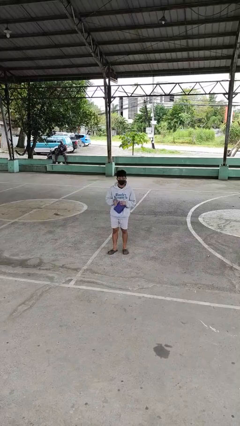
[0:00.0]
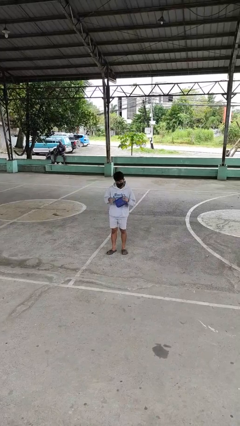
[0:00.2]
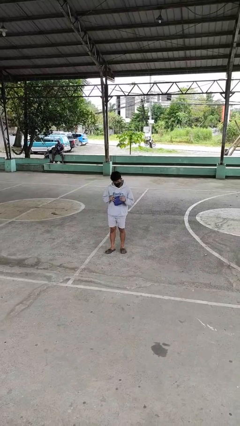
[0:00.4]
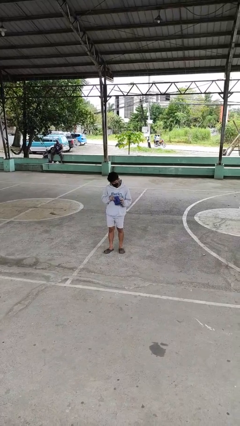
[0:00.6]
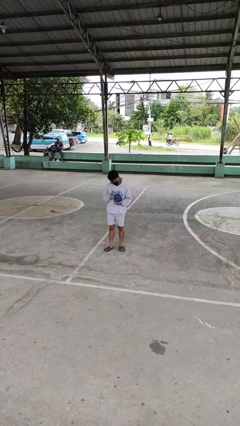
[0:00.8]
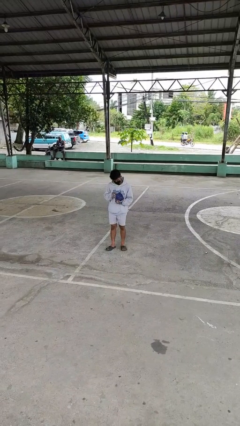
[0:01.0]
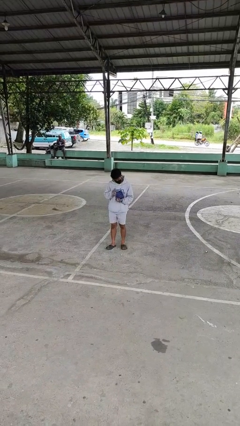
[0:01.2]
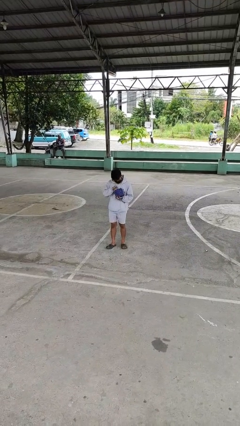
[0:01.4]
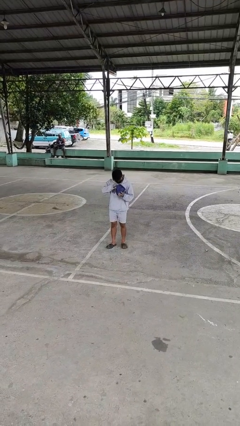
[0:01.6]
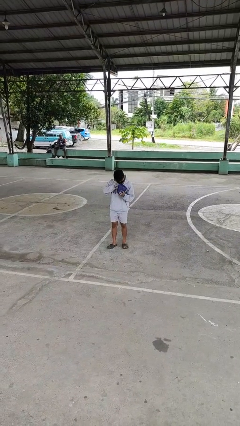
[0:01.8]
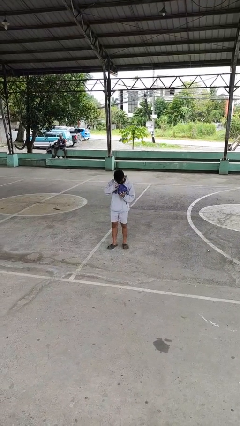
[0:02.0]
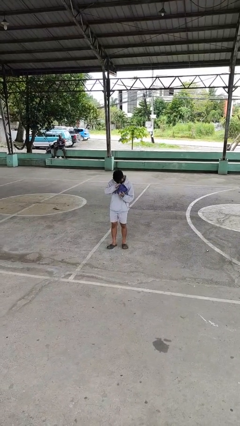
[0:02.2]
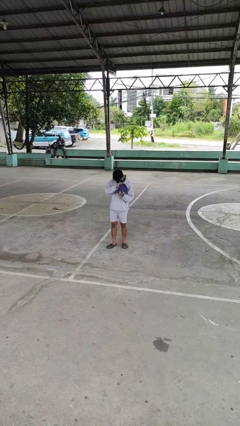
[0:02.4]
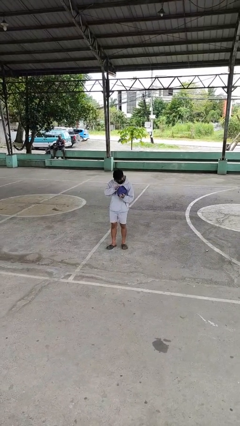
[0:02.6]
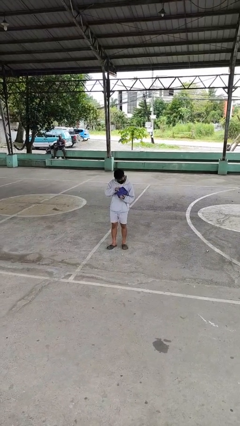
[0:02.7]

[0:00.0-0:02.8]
person searches in purse

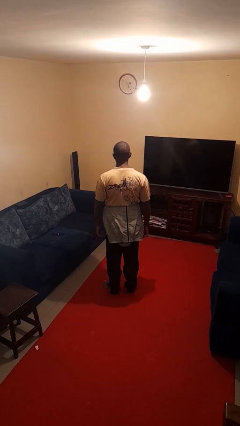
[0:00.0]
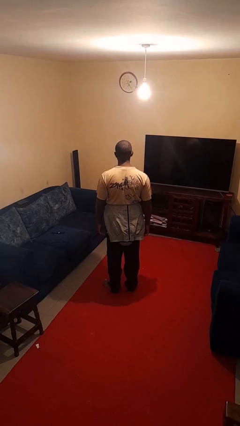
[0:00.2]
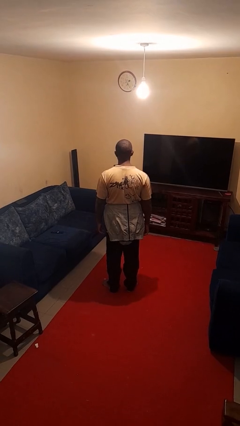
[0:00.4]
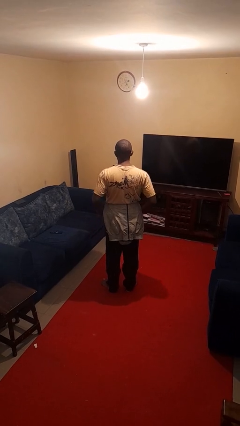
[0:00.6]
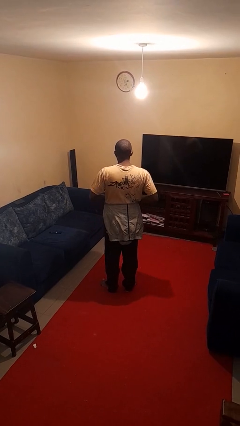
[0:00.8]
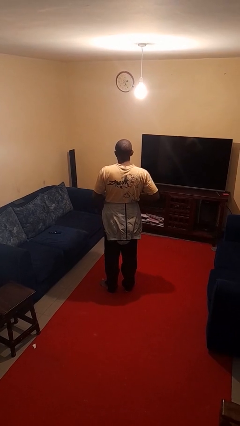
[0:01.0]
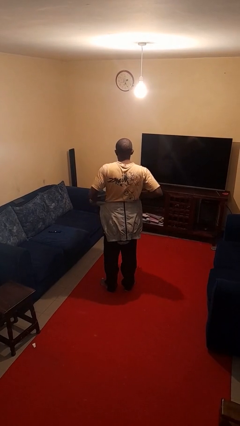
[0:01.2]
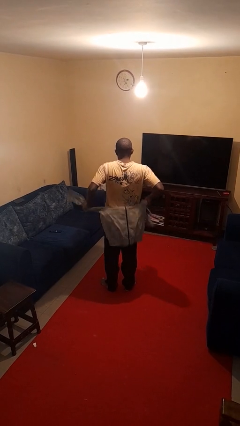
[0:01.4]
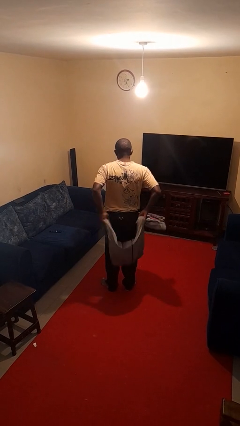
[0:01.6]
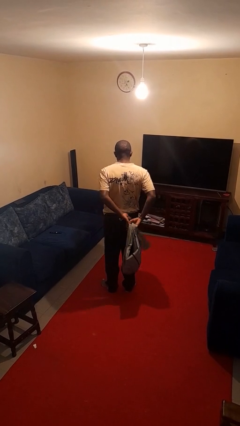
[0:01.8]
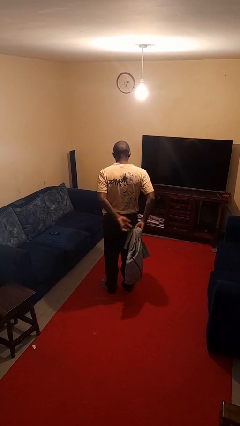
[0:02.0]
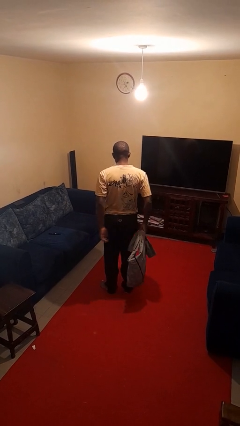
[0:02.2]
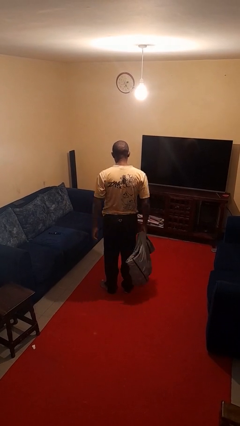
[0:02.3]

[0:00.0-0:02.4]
person unties jacket around waist

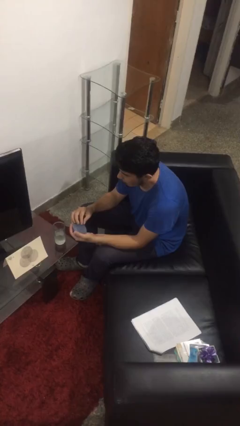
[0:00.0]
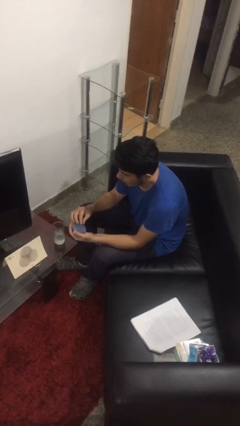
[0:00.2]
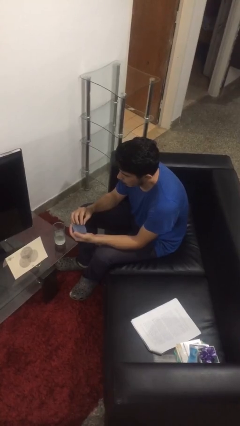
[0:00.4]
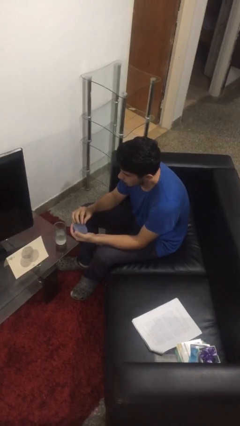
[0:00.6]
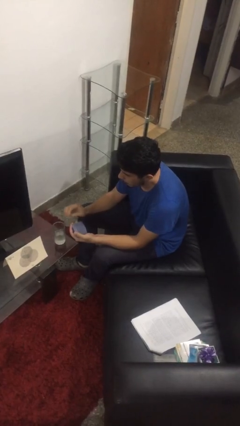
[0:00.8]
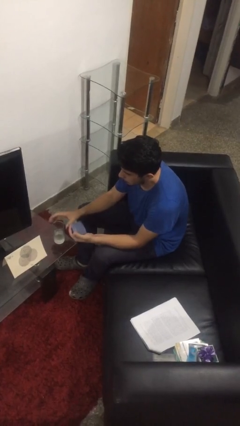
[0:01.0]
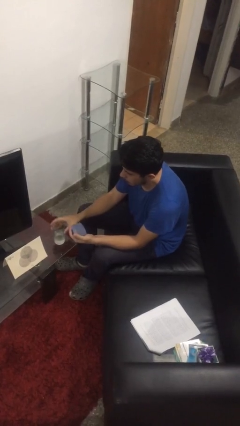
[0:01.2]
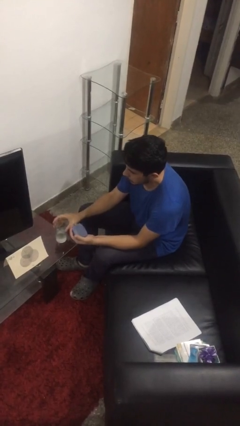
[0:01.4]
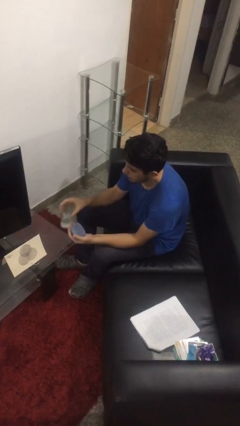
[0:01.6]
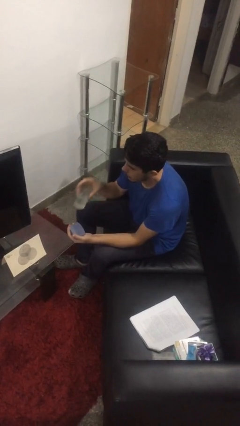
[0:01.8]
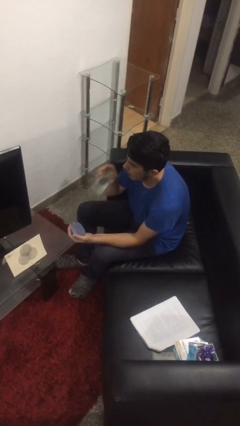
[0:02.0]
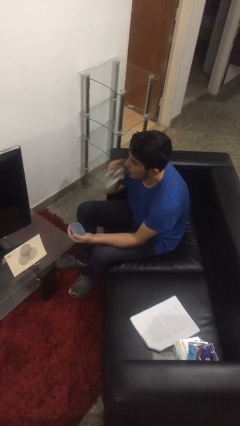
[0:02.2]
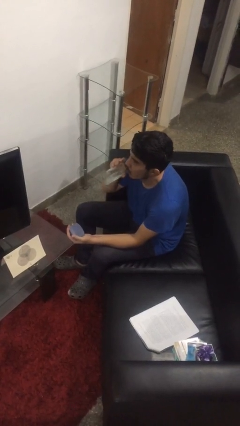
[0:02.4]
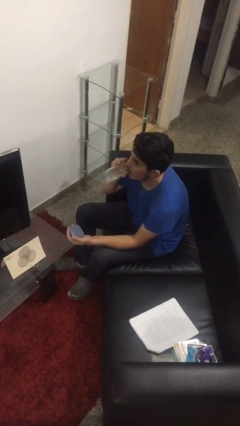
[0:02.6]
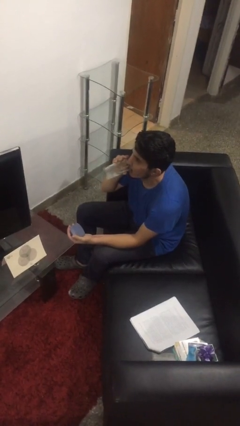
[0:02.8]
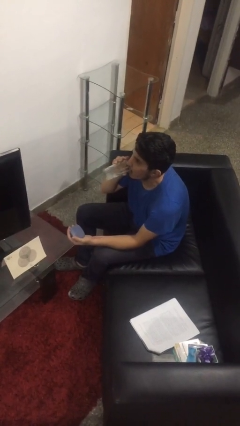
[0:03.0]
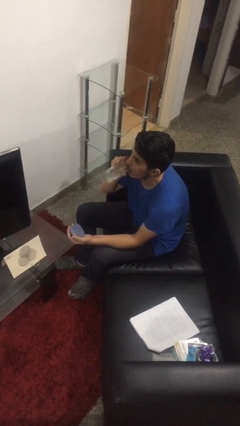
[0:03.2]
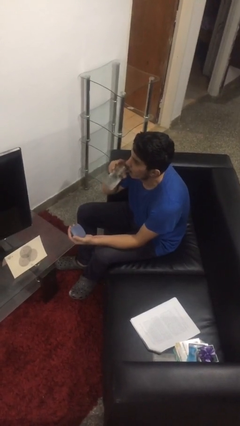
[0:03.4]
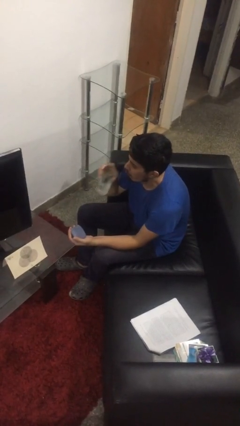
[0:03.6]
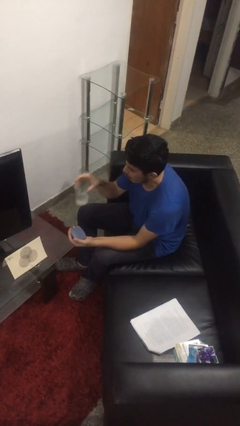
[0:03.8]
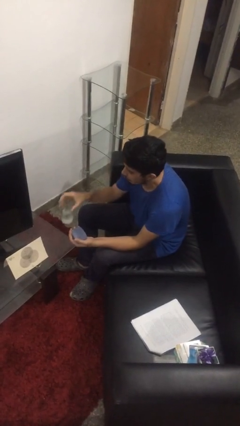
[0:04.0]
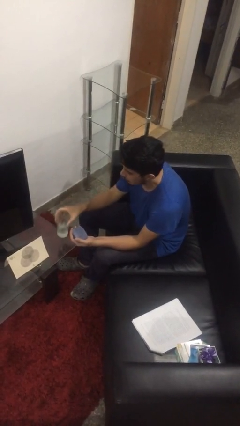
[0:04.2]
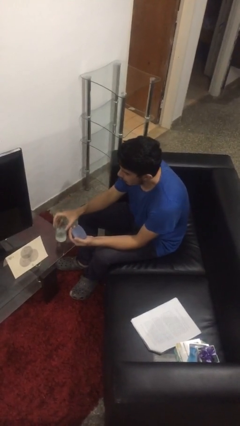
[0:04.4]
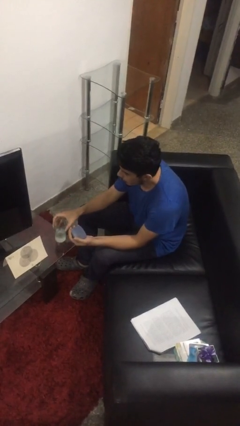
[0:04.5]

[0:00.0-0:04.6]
person drinks from cup

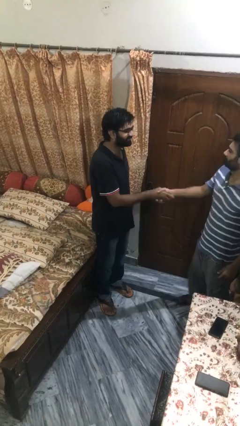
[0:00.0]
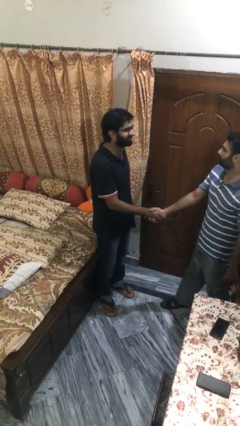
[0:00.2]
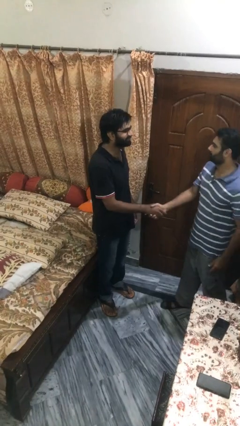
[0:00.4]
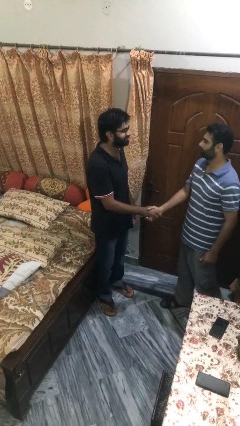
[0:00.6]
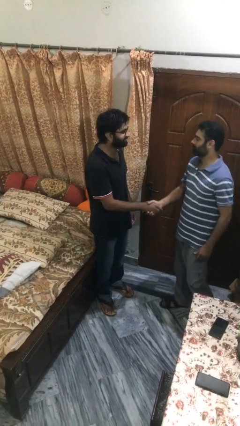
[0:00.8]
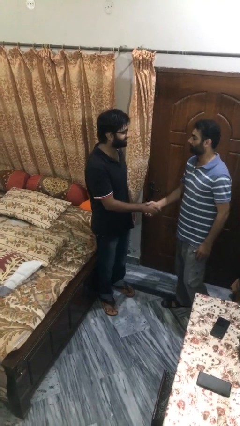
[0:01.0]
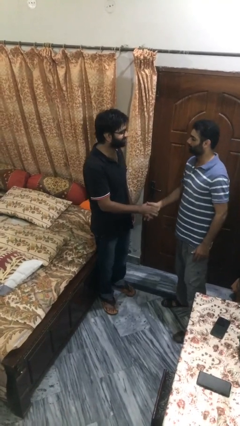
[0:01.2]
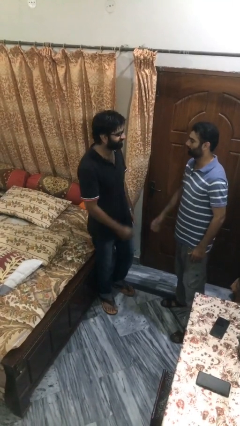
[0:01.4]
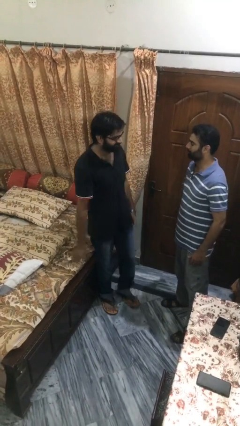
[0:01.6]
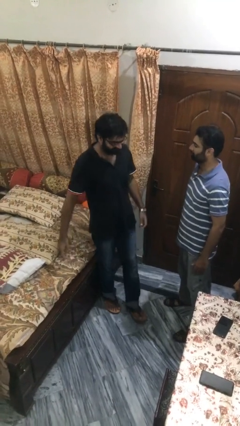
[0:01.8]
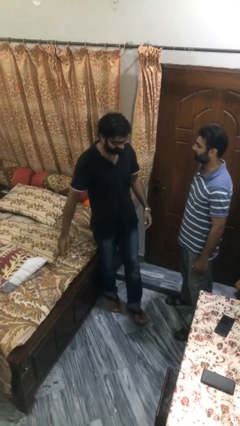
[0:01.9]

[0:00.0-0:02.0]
person shakes hand

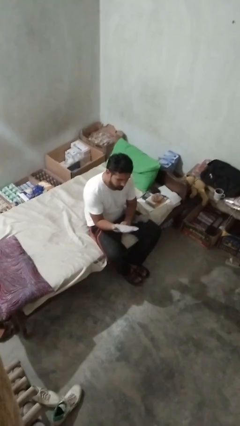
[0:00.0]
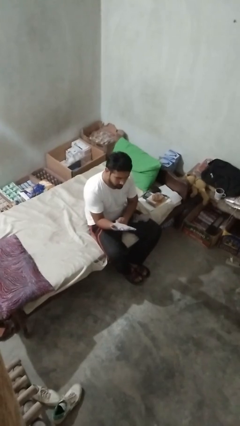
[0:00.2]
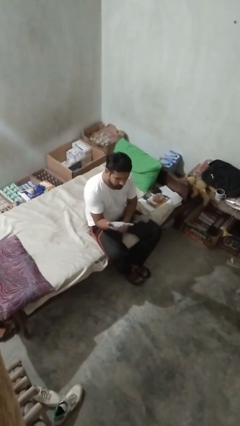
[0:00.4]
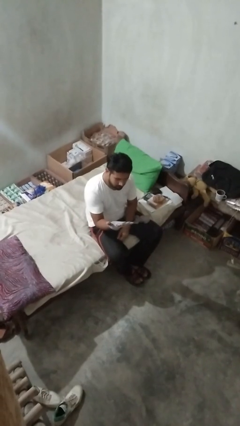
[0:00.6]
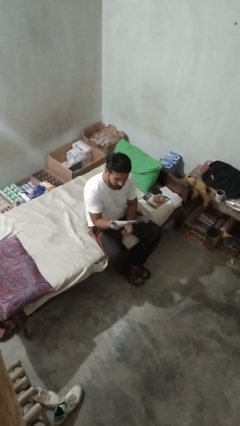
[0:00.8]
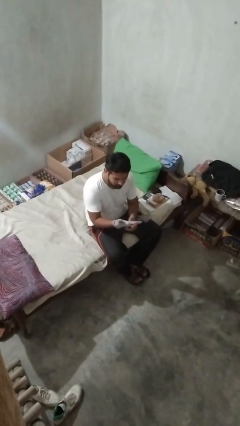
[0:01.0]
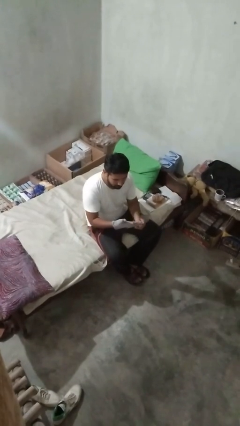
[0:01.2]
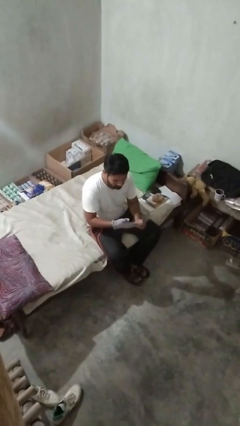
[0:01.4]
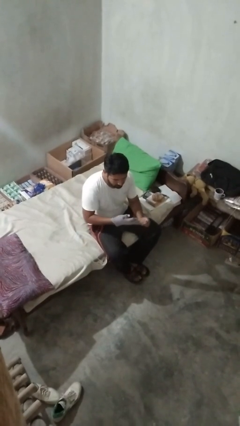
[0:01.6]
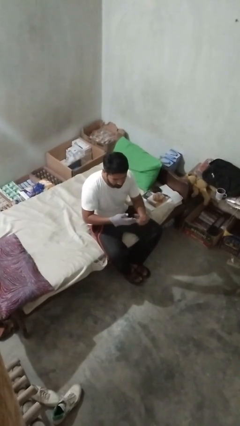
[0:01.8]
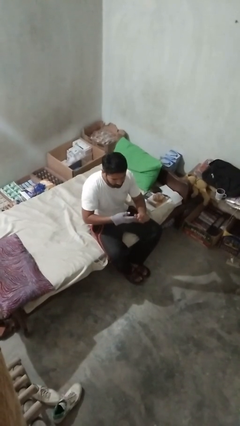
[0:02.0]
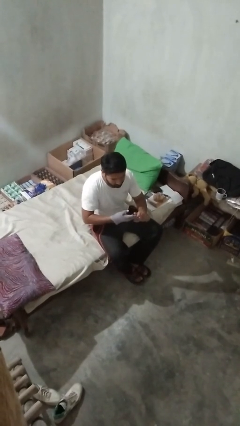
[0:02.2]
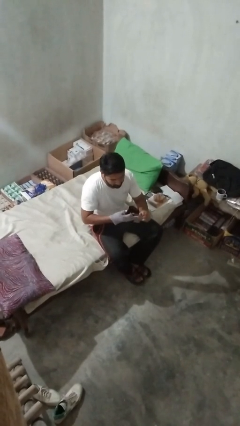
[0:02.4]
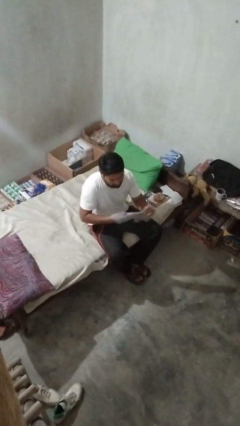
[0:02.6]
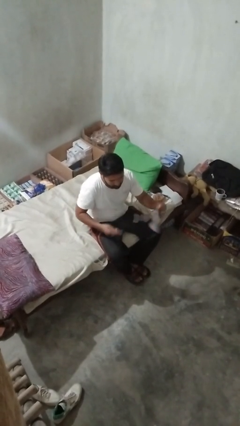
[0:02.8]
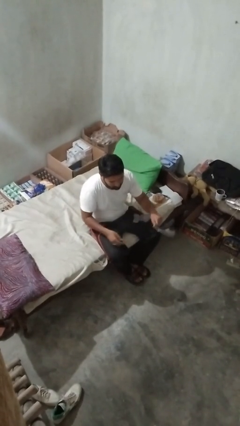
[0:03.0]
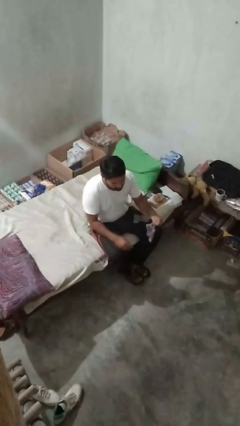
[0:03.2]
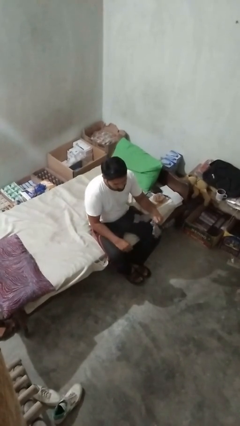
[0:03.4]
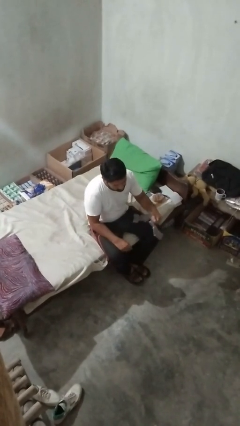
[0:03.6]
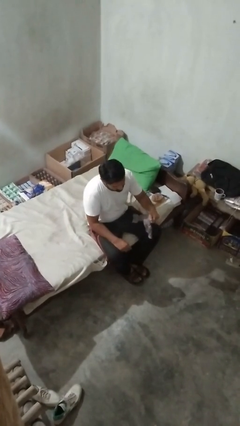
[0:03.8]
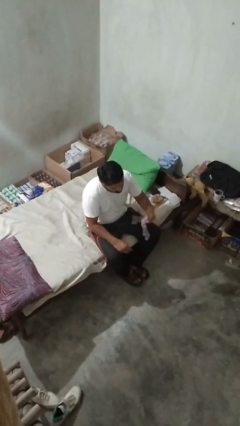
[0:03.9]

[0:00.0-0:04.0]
person takes off gloves

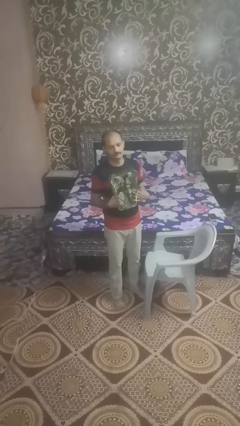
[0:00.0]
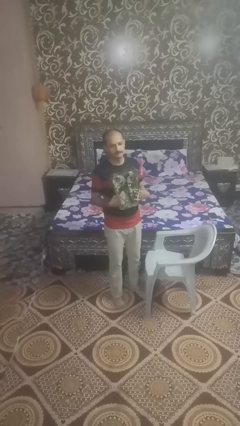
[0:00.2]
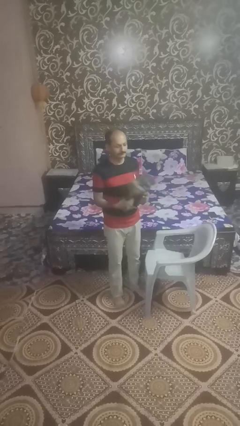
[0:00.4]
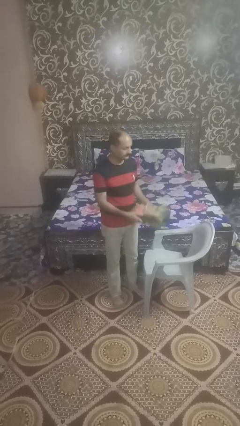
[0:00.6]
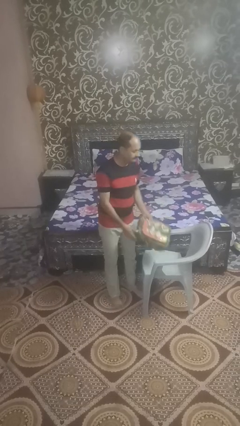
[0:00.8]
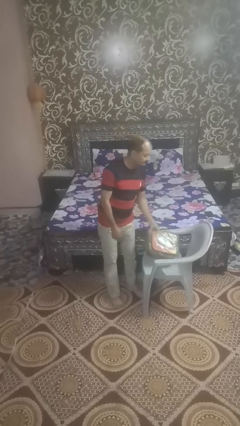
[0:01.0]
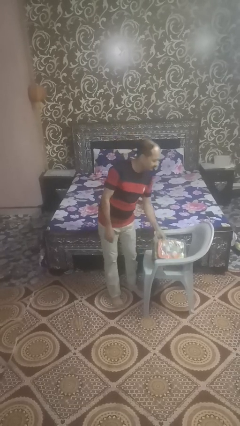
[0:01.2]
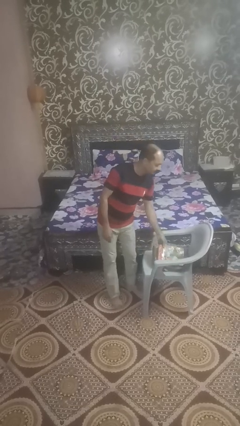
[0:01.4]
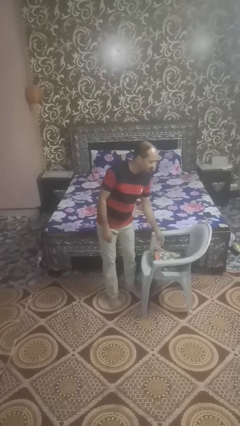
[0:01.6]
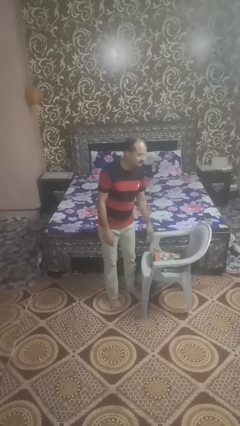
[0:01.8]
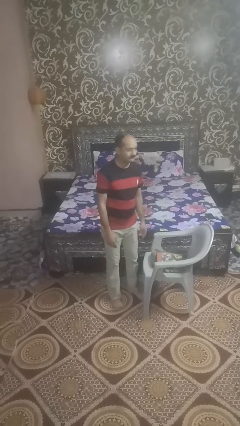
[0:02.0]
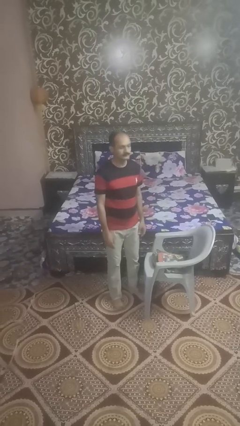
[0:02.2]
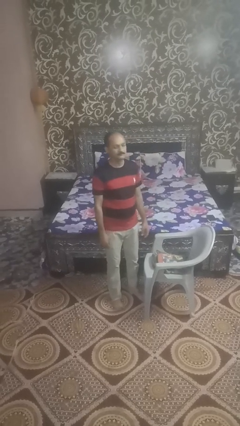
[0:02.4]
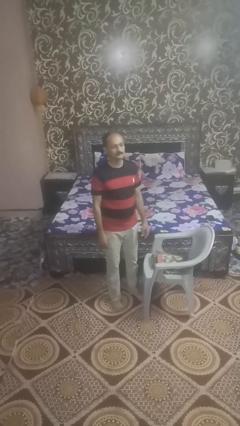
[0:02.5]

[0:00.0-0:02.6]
person puts down object on couch
